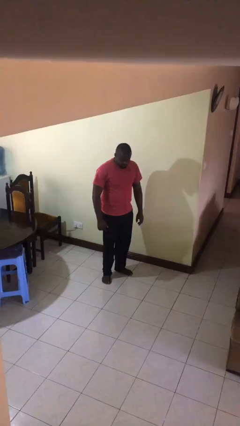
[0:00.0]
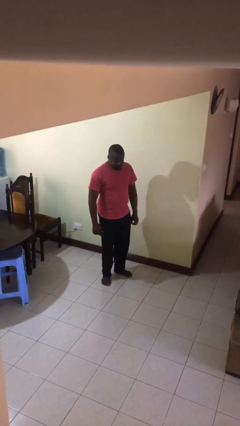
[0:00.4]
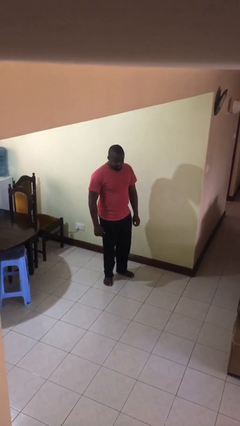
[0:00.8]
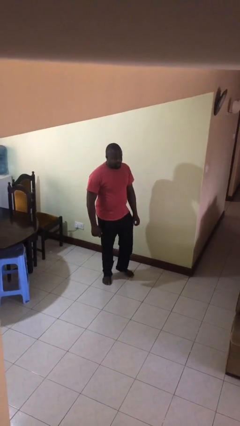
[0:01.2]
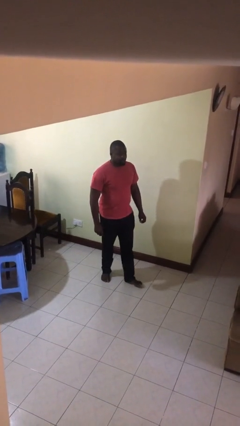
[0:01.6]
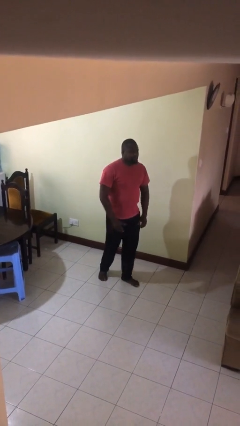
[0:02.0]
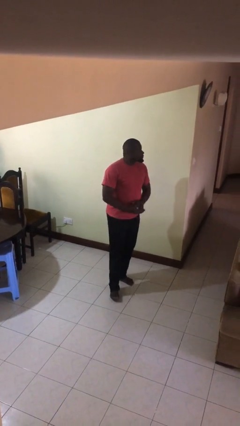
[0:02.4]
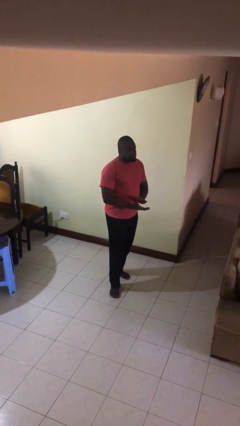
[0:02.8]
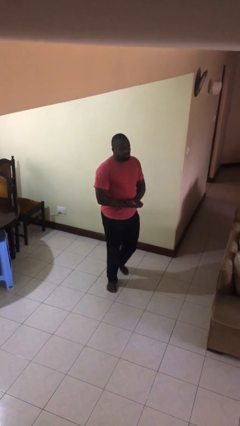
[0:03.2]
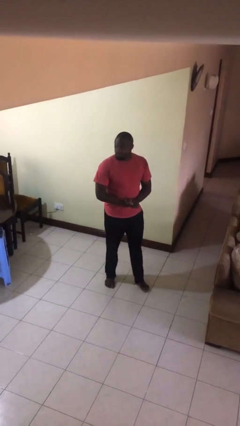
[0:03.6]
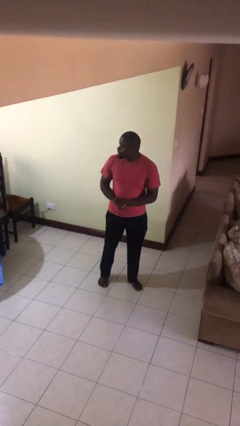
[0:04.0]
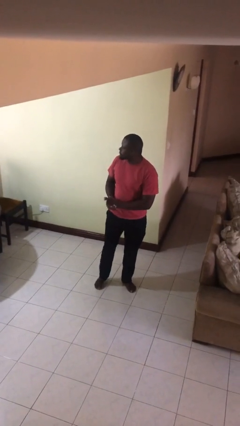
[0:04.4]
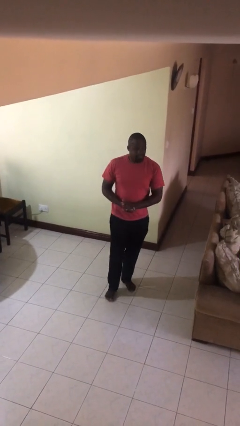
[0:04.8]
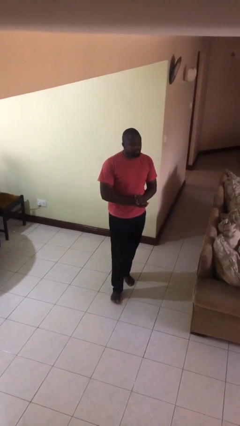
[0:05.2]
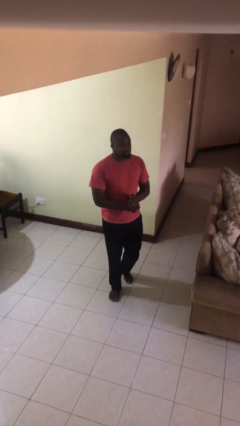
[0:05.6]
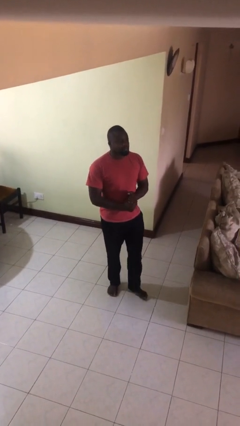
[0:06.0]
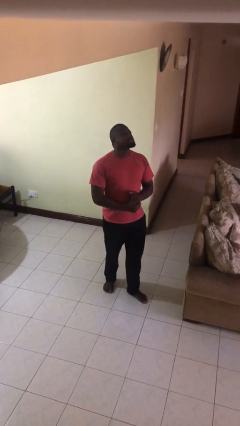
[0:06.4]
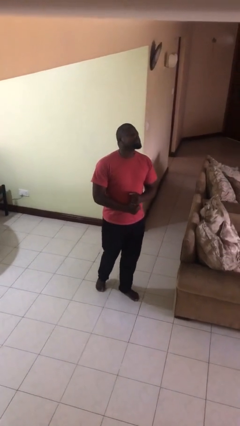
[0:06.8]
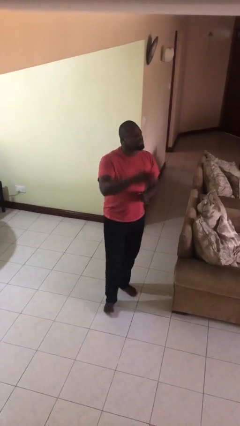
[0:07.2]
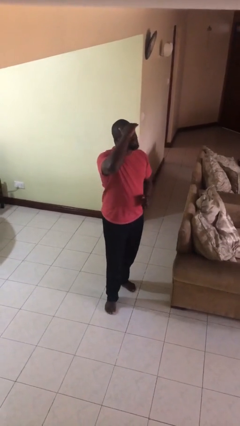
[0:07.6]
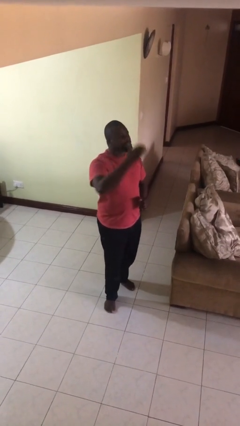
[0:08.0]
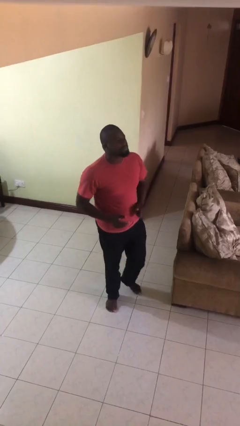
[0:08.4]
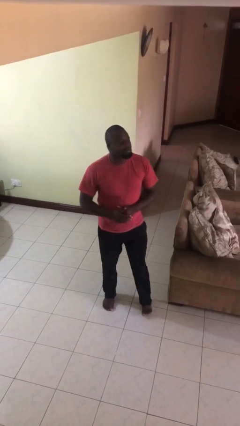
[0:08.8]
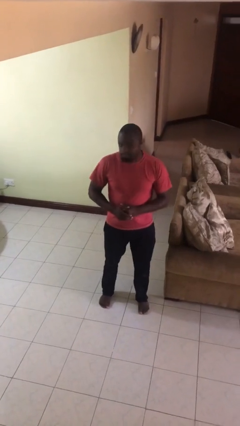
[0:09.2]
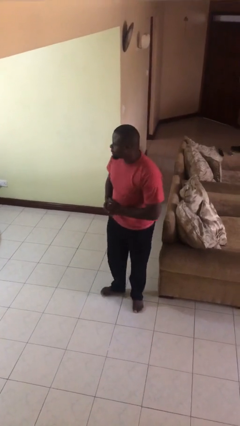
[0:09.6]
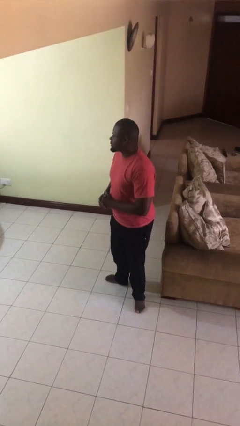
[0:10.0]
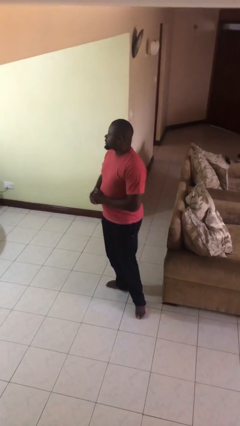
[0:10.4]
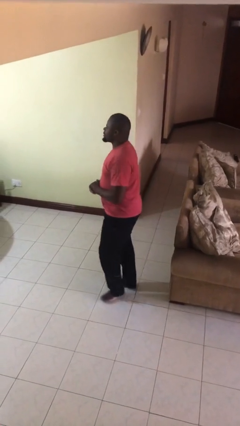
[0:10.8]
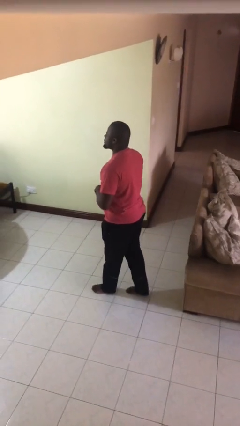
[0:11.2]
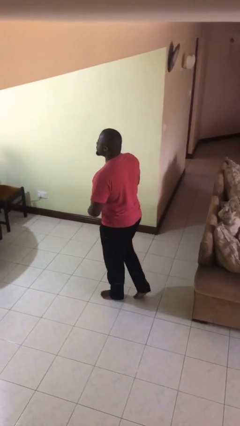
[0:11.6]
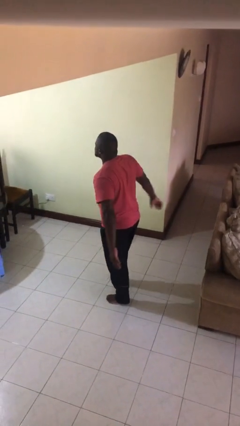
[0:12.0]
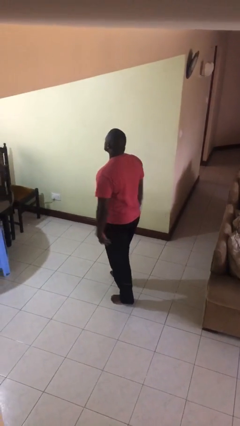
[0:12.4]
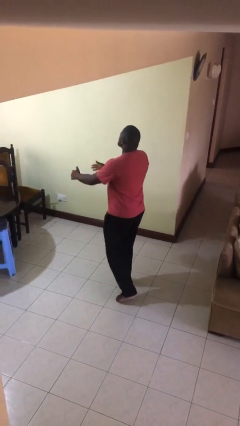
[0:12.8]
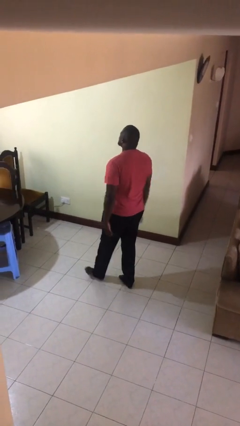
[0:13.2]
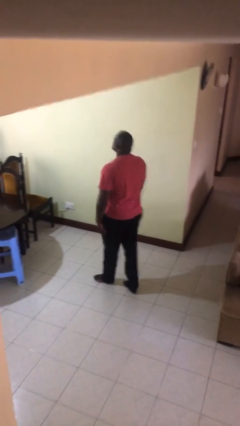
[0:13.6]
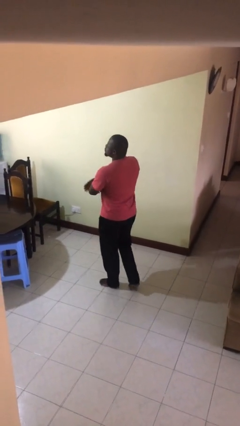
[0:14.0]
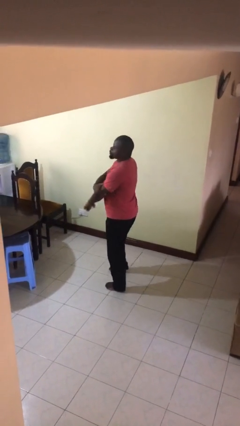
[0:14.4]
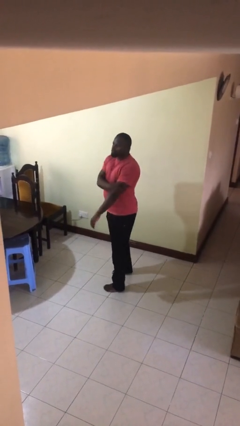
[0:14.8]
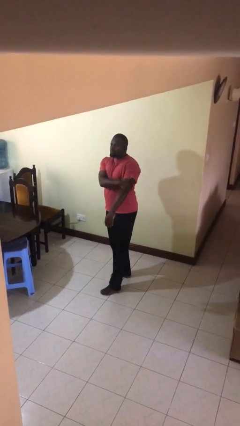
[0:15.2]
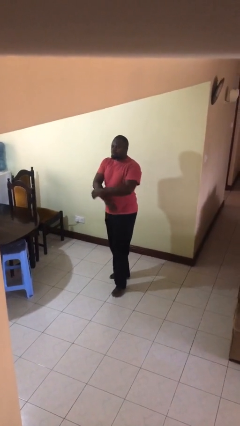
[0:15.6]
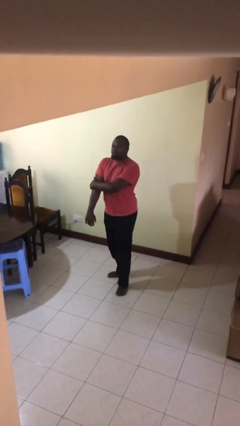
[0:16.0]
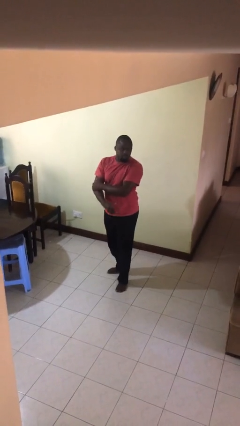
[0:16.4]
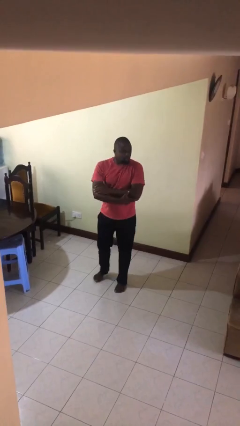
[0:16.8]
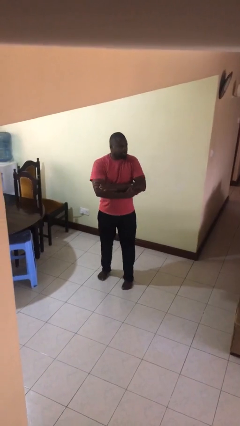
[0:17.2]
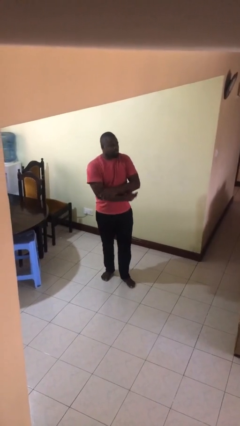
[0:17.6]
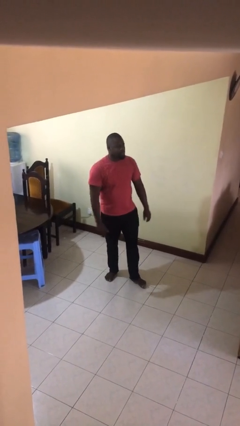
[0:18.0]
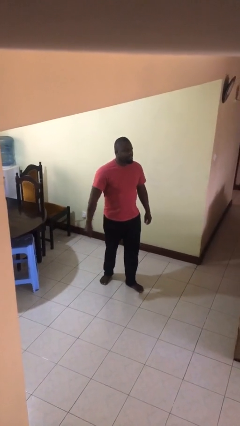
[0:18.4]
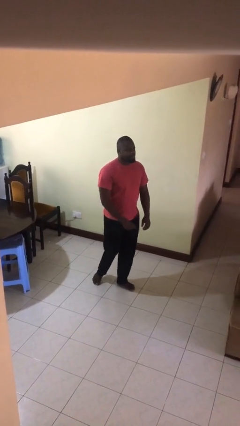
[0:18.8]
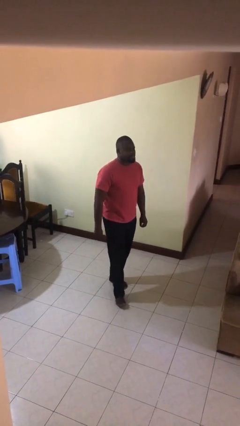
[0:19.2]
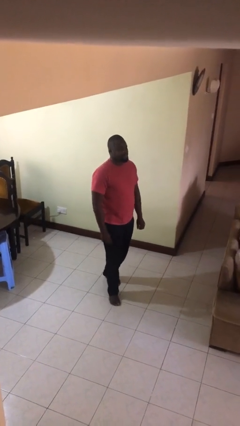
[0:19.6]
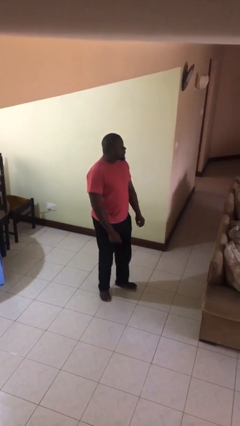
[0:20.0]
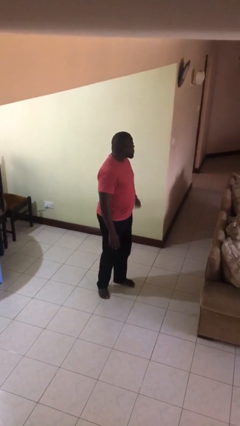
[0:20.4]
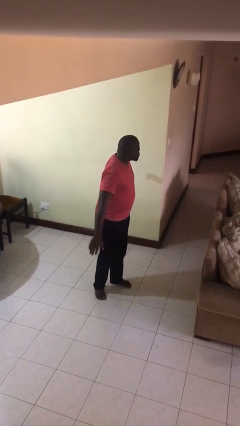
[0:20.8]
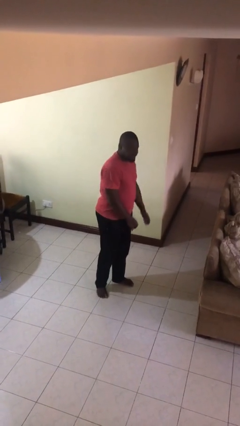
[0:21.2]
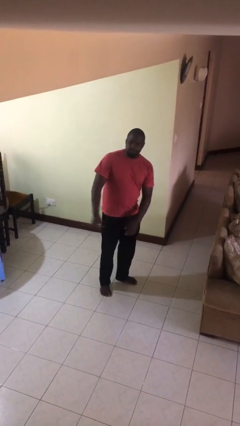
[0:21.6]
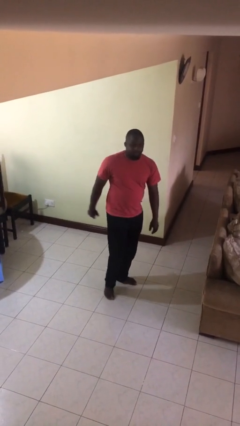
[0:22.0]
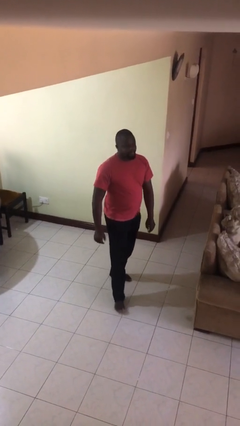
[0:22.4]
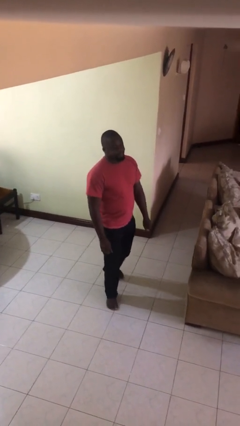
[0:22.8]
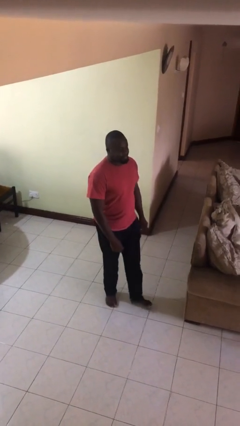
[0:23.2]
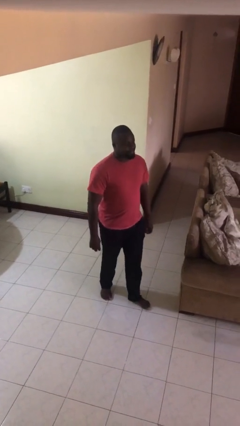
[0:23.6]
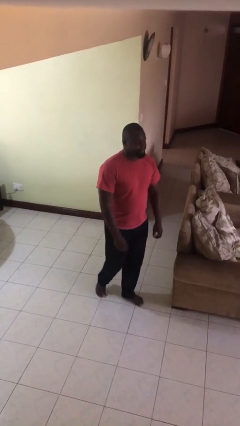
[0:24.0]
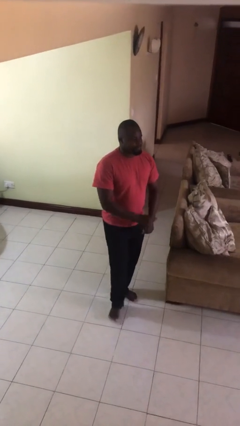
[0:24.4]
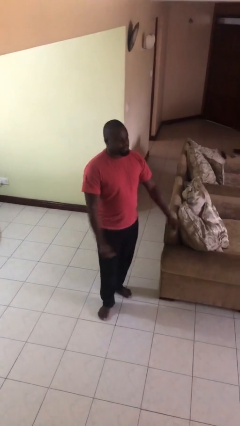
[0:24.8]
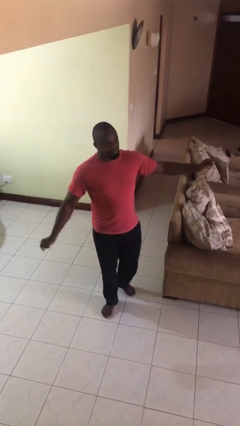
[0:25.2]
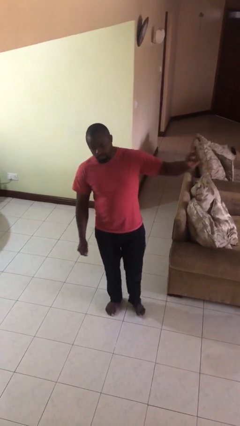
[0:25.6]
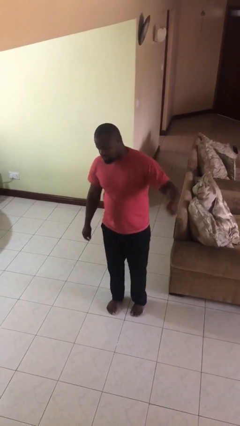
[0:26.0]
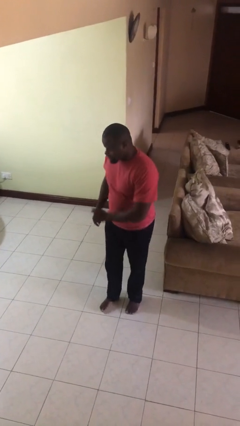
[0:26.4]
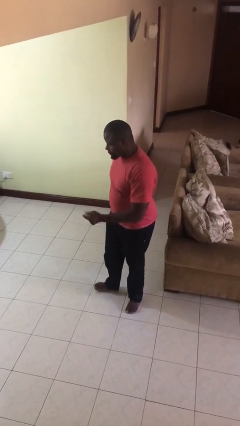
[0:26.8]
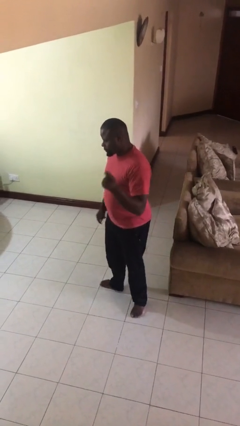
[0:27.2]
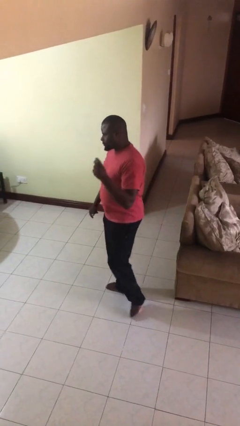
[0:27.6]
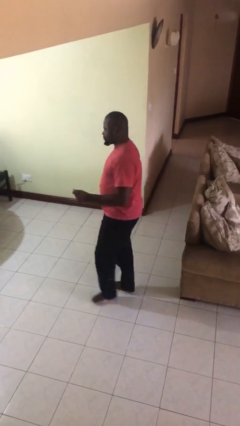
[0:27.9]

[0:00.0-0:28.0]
person walks

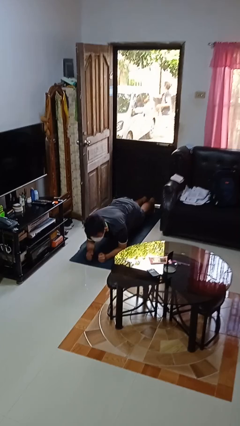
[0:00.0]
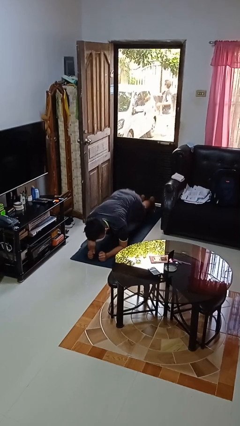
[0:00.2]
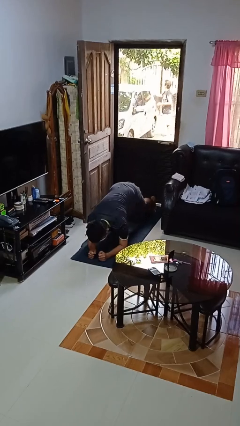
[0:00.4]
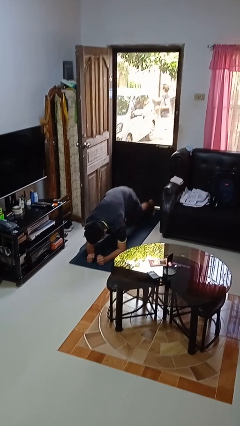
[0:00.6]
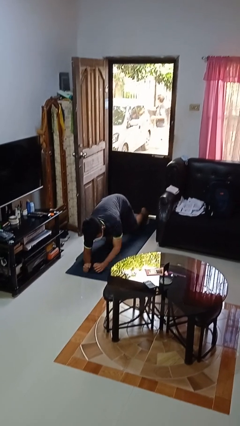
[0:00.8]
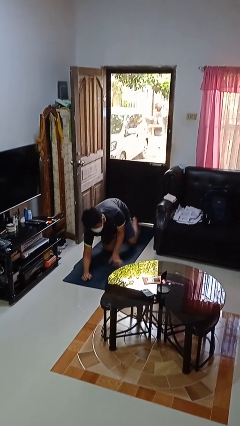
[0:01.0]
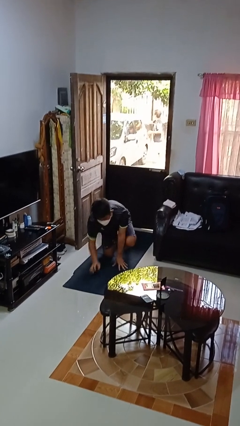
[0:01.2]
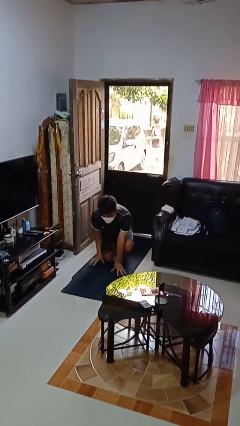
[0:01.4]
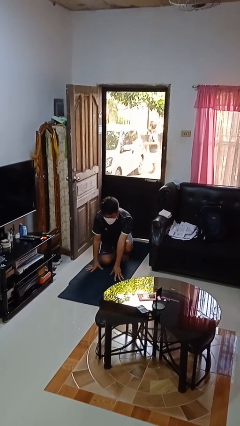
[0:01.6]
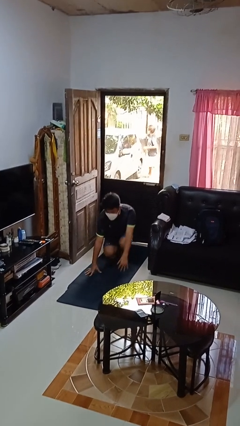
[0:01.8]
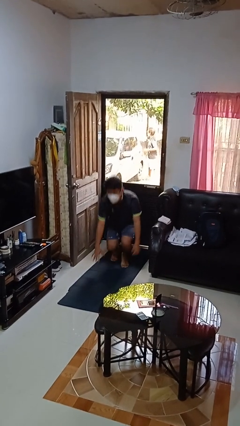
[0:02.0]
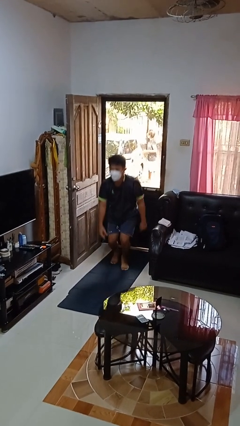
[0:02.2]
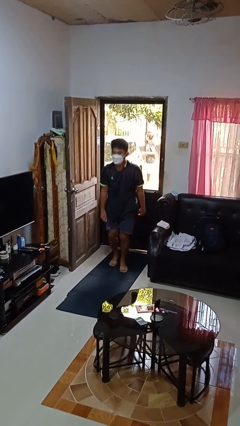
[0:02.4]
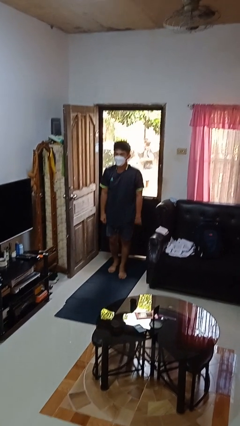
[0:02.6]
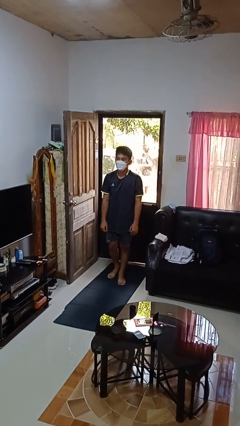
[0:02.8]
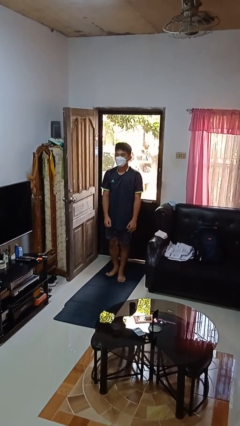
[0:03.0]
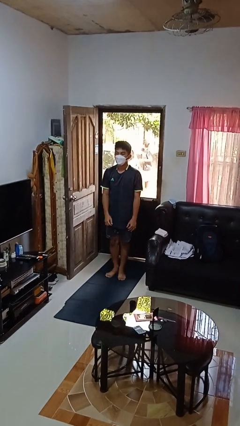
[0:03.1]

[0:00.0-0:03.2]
person stands up from floor

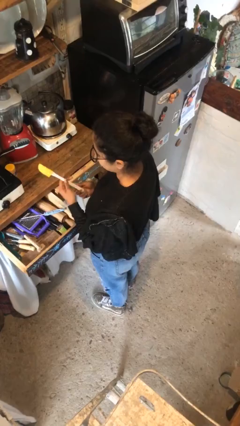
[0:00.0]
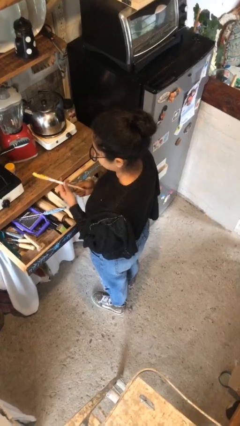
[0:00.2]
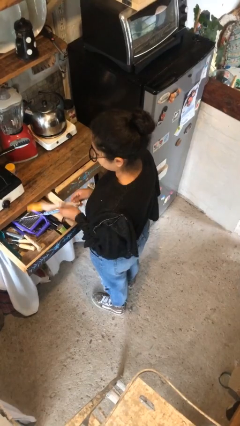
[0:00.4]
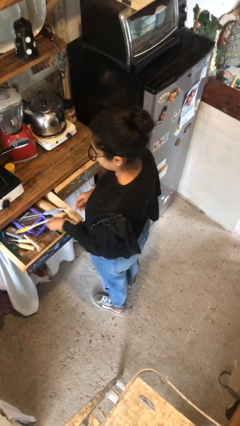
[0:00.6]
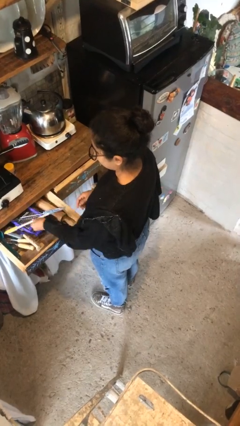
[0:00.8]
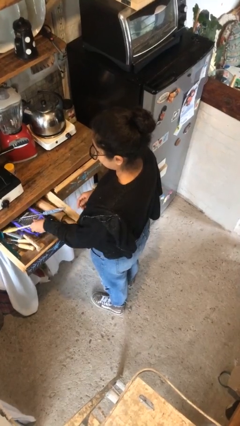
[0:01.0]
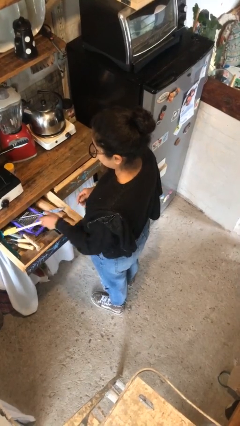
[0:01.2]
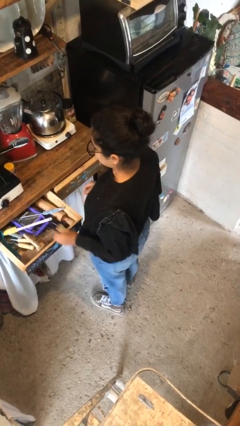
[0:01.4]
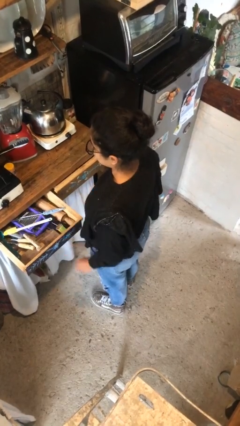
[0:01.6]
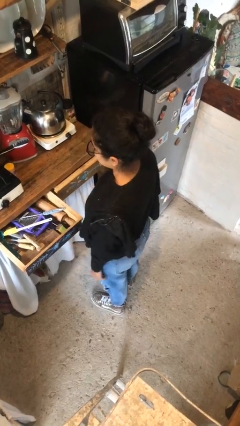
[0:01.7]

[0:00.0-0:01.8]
person puts object into kitchen drawer
